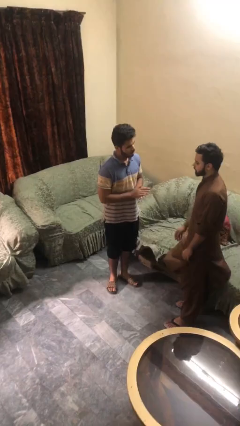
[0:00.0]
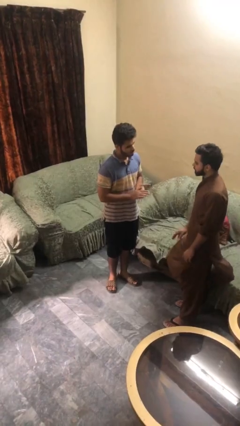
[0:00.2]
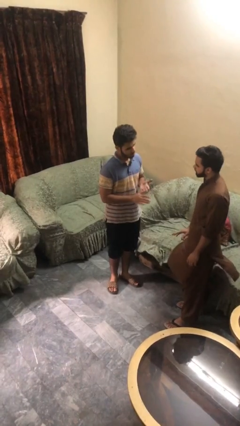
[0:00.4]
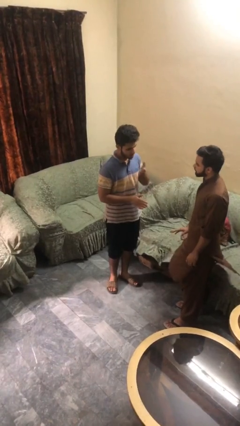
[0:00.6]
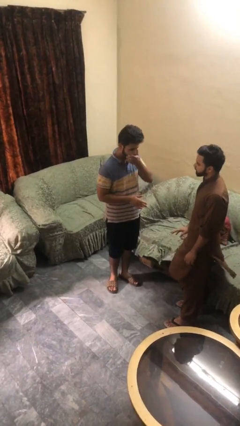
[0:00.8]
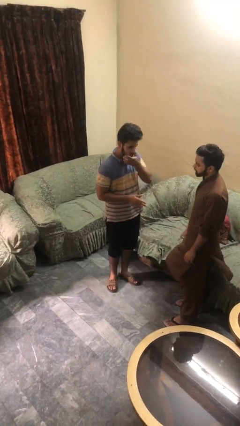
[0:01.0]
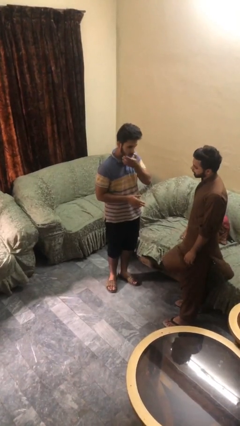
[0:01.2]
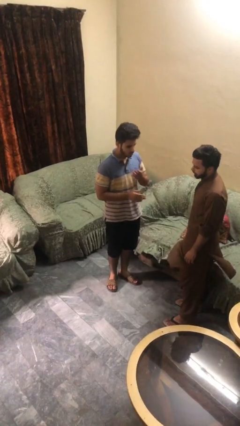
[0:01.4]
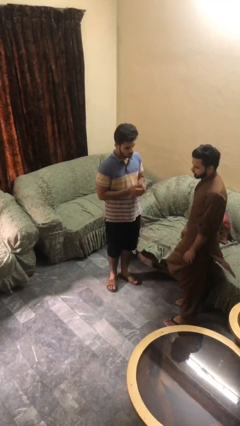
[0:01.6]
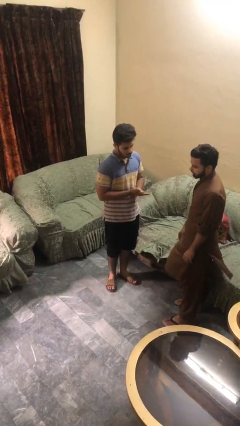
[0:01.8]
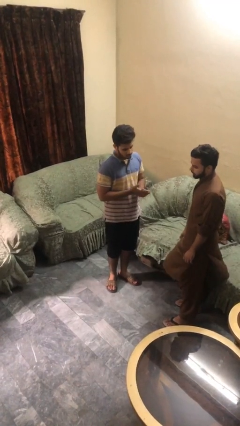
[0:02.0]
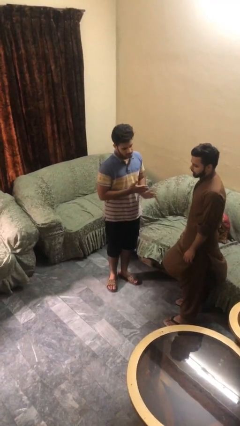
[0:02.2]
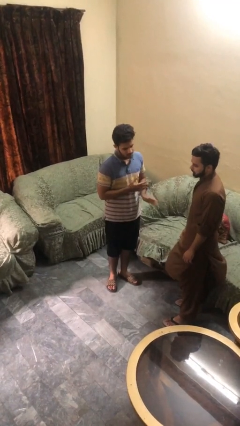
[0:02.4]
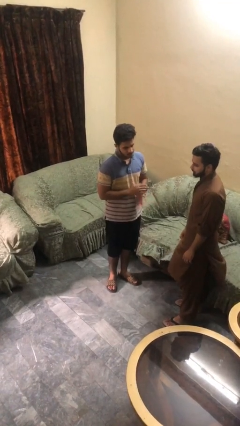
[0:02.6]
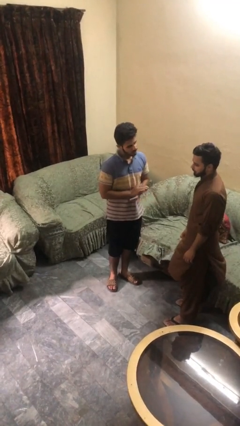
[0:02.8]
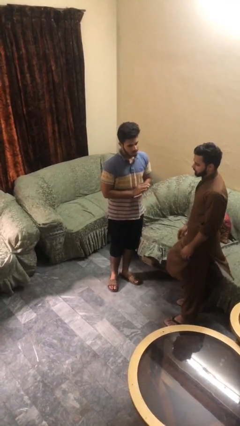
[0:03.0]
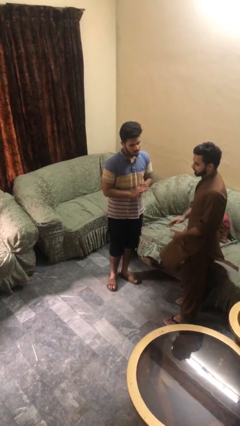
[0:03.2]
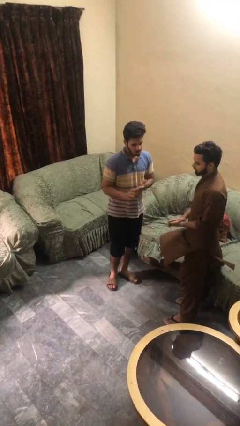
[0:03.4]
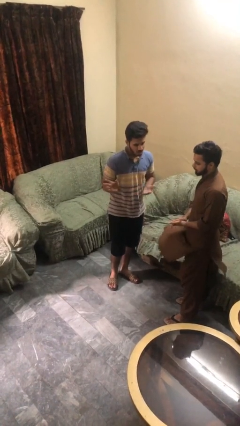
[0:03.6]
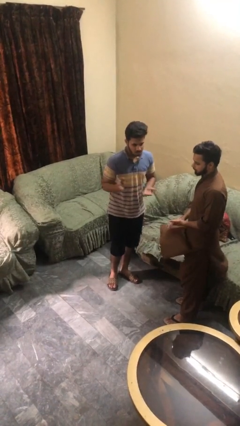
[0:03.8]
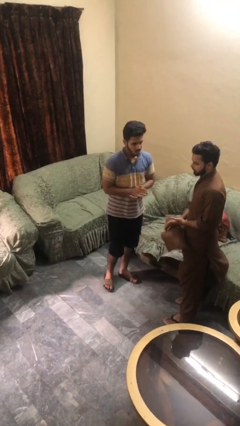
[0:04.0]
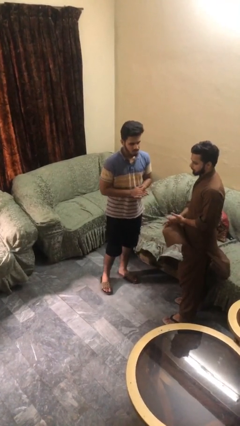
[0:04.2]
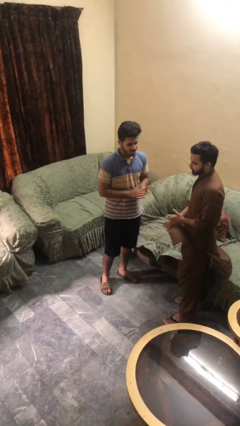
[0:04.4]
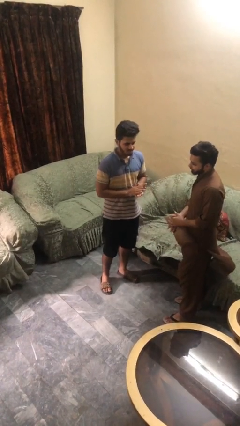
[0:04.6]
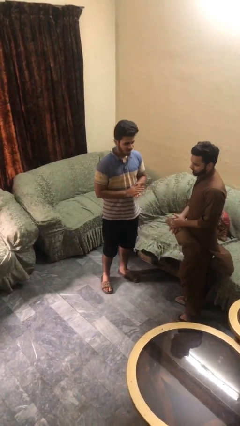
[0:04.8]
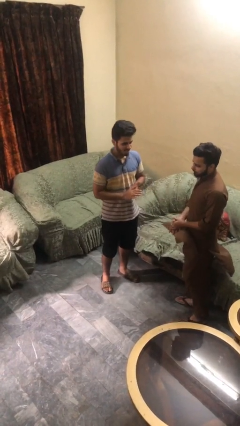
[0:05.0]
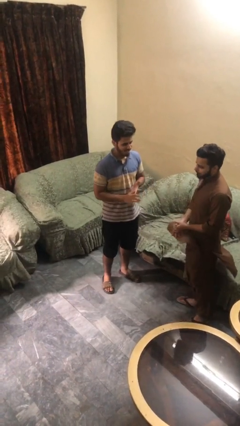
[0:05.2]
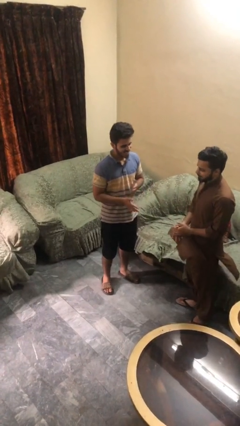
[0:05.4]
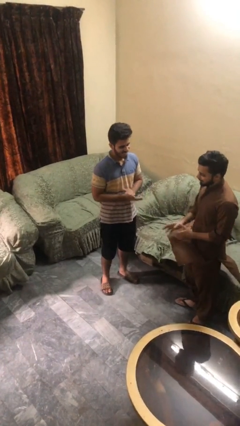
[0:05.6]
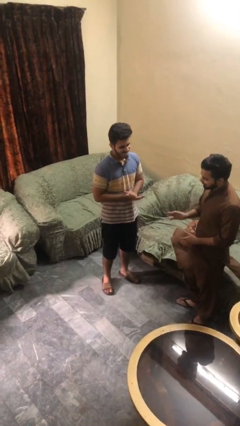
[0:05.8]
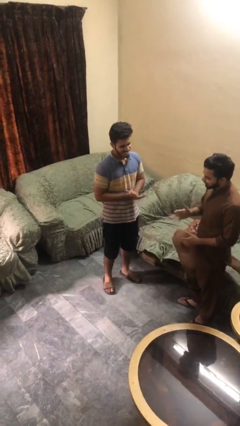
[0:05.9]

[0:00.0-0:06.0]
person talks to person

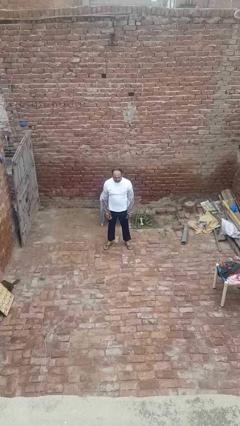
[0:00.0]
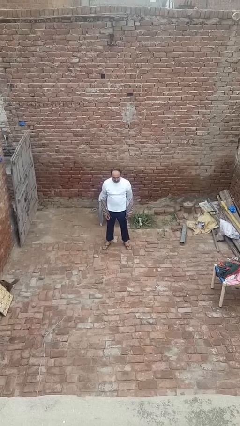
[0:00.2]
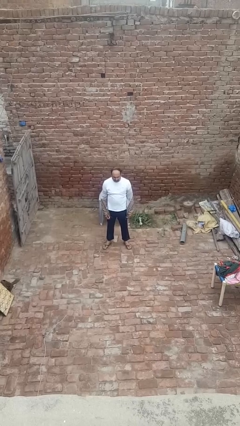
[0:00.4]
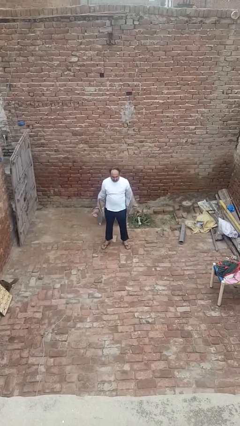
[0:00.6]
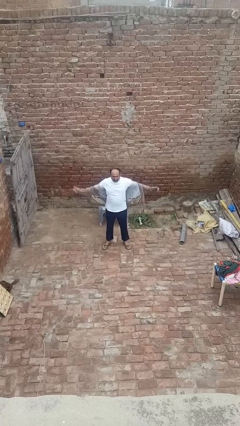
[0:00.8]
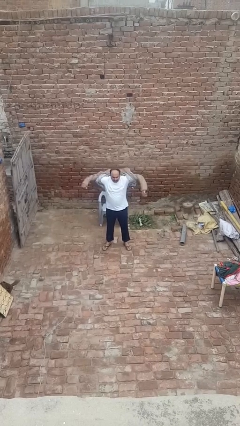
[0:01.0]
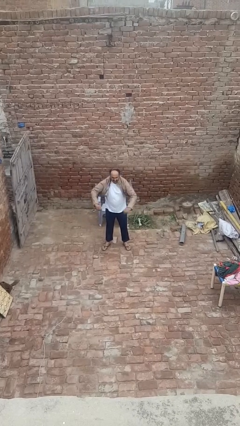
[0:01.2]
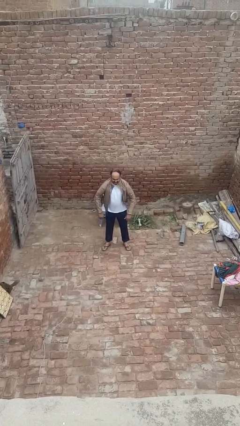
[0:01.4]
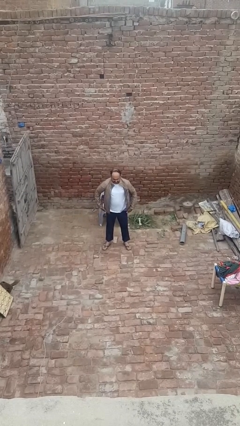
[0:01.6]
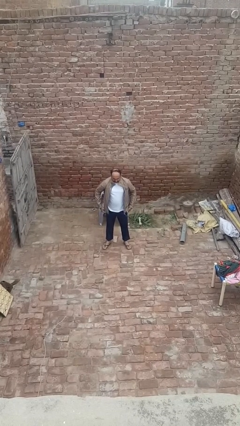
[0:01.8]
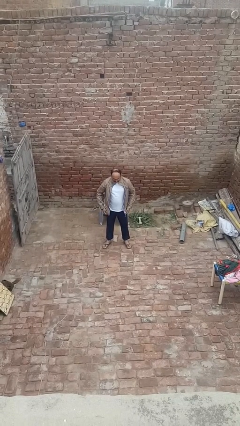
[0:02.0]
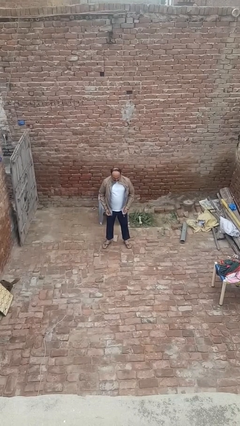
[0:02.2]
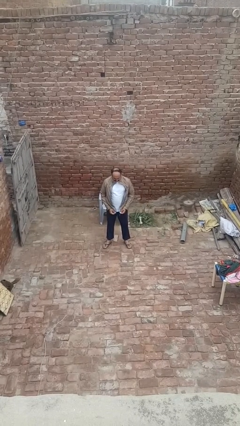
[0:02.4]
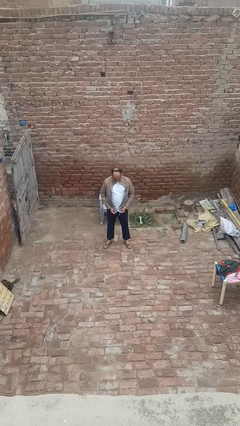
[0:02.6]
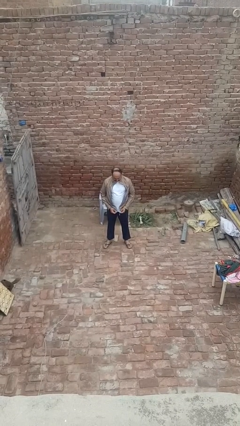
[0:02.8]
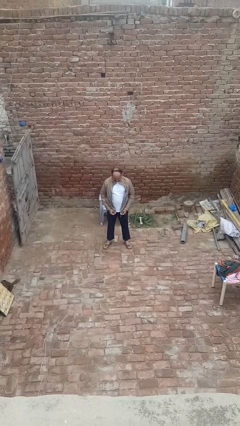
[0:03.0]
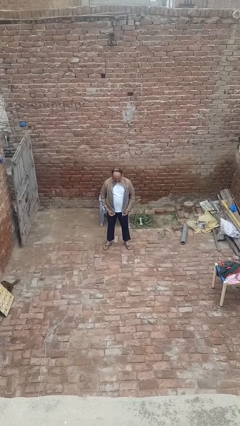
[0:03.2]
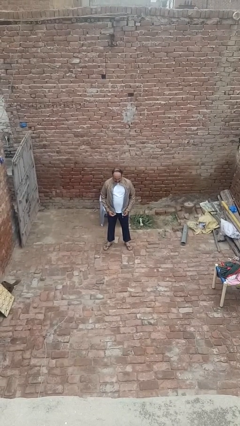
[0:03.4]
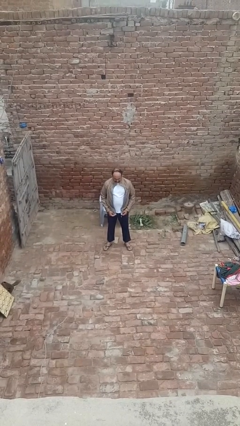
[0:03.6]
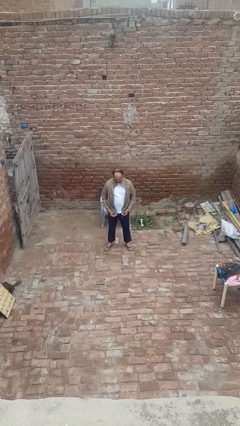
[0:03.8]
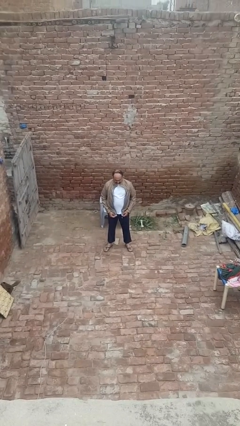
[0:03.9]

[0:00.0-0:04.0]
person puts on jacket

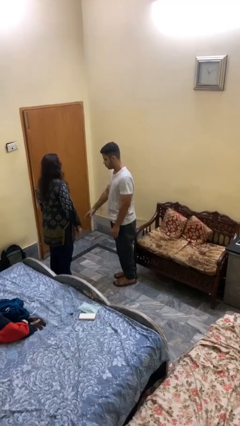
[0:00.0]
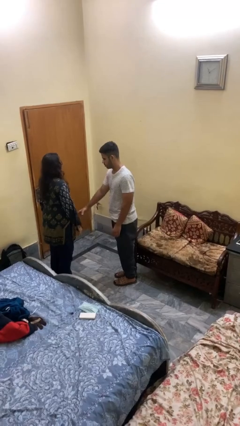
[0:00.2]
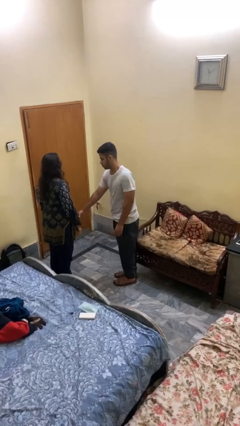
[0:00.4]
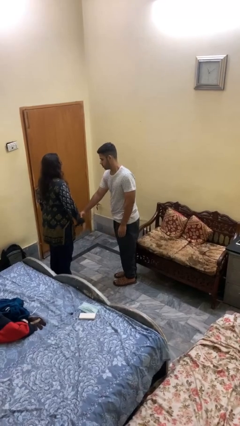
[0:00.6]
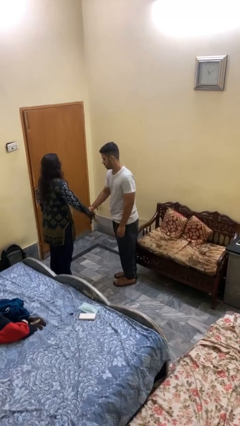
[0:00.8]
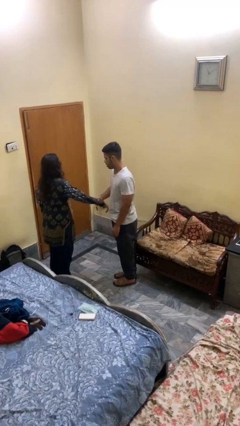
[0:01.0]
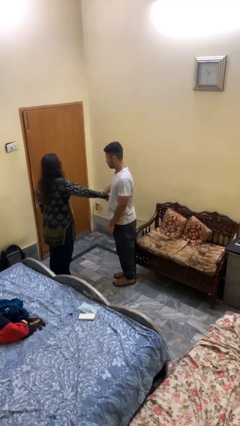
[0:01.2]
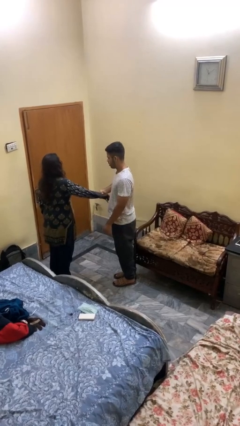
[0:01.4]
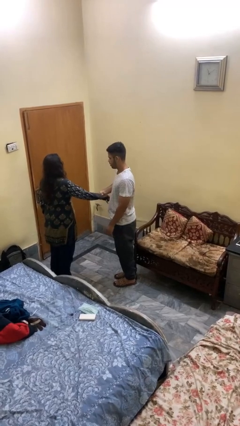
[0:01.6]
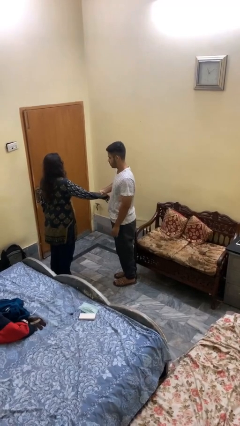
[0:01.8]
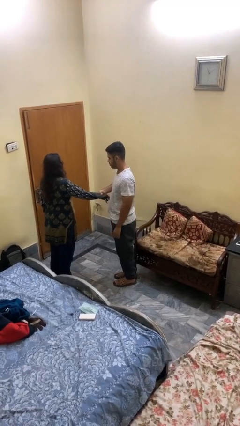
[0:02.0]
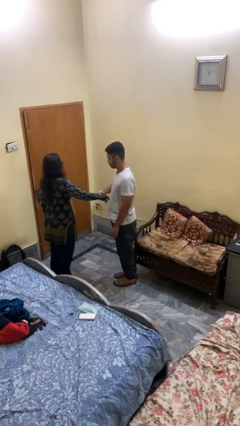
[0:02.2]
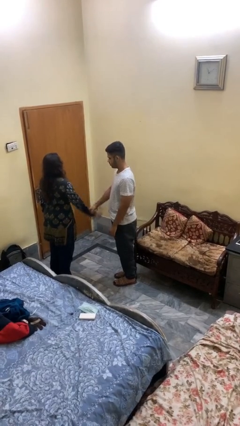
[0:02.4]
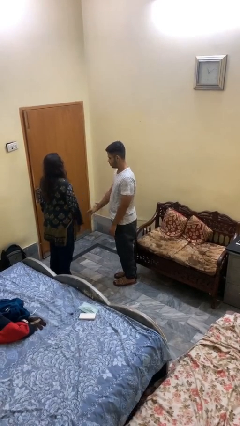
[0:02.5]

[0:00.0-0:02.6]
person grabs person by forearm

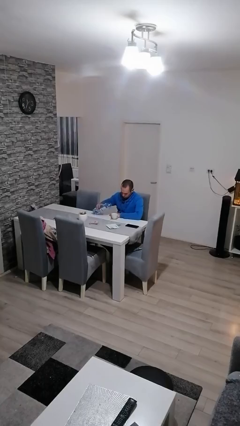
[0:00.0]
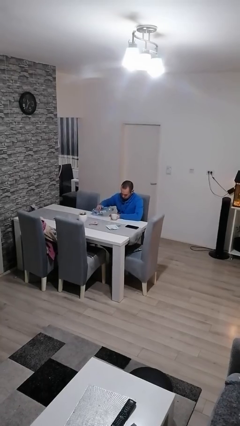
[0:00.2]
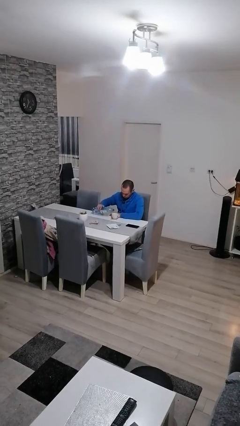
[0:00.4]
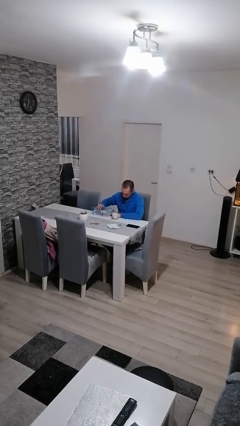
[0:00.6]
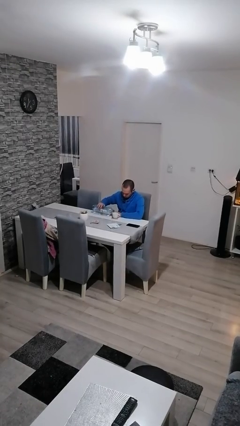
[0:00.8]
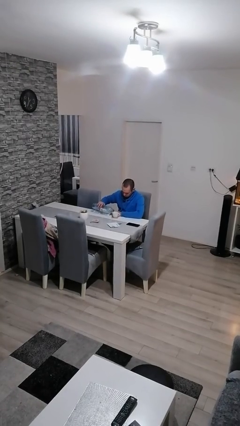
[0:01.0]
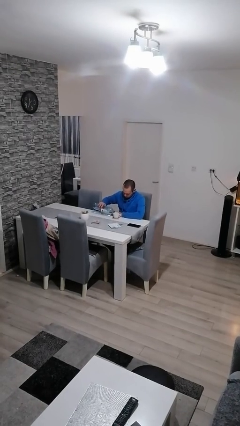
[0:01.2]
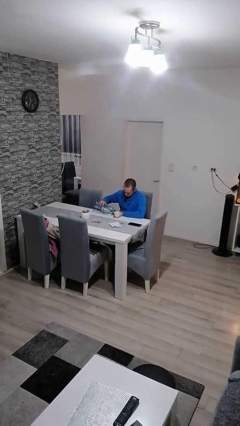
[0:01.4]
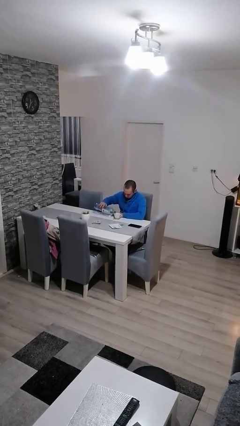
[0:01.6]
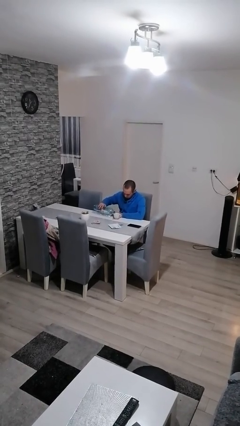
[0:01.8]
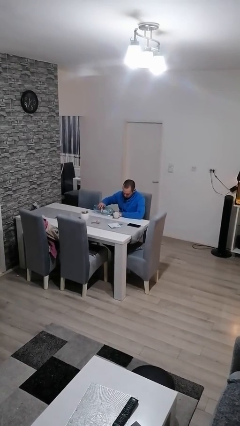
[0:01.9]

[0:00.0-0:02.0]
person pours liquid into cup

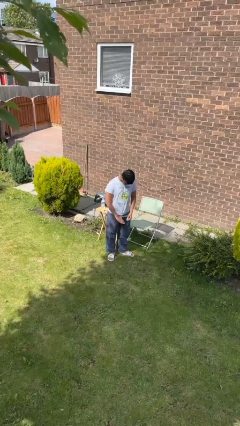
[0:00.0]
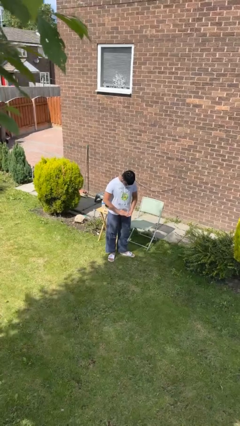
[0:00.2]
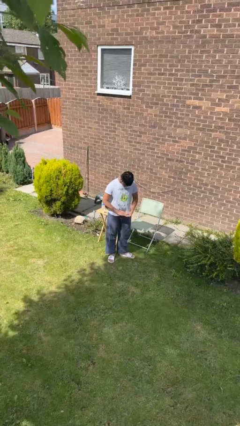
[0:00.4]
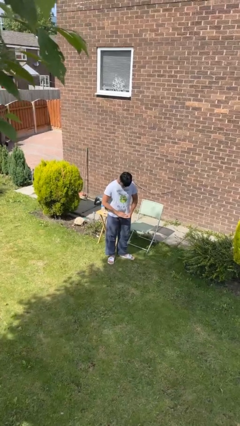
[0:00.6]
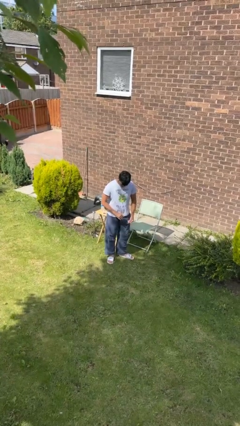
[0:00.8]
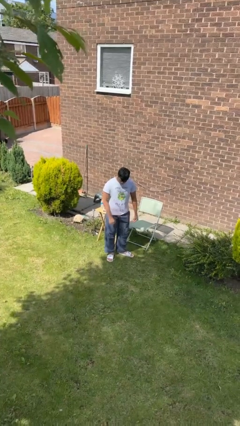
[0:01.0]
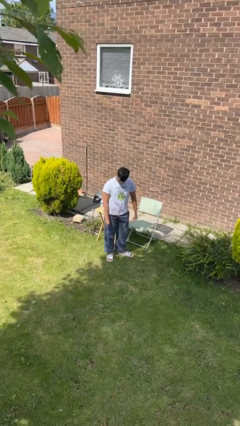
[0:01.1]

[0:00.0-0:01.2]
person takes off ring

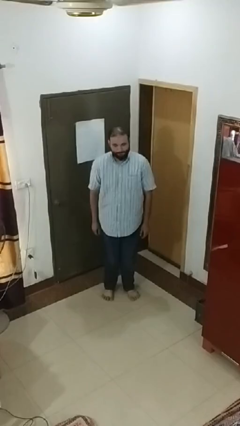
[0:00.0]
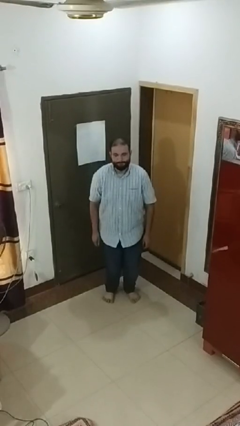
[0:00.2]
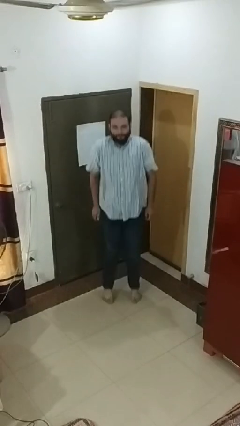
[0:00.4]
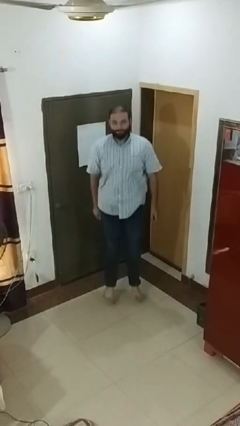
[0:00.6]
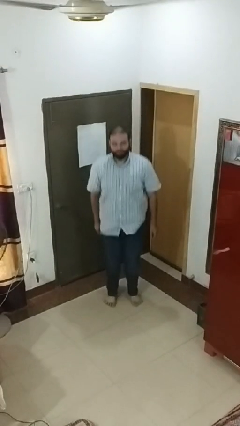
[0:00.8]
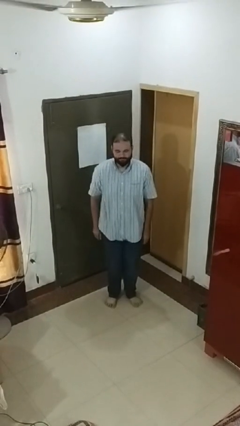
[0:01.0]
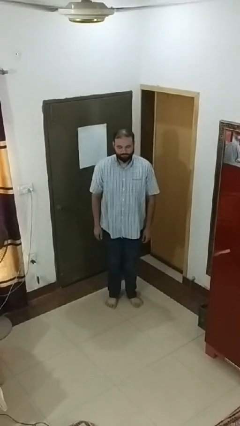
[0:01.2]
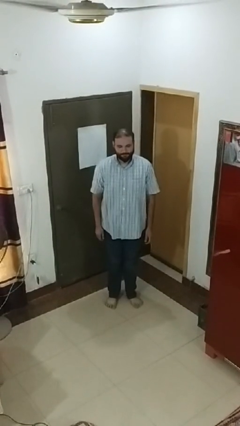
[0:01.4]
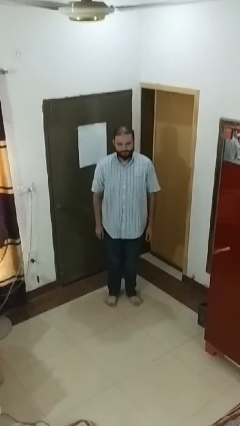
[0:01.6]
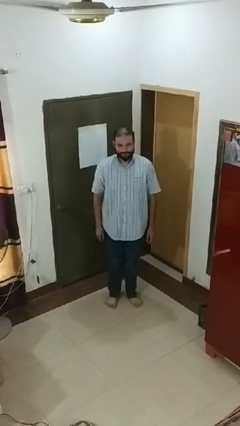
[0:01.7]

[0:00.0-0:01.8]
person jumps
